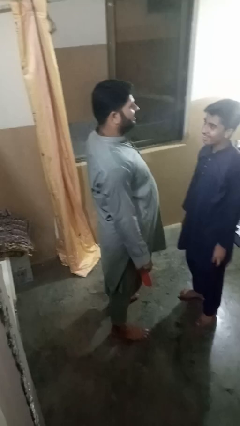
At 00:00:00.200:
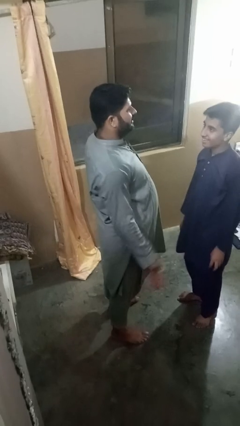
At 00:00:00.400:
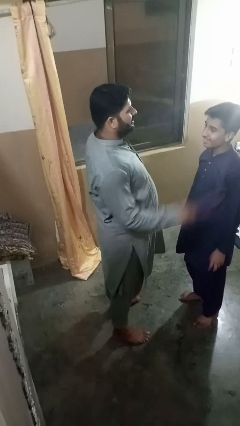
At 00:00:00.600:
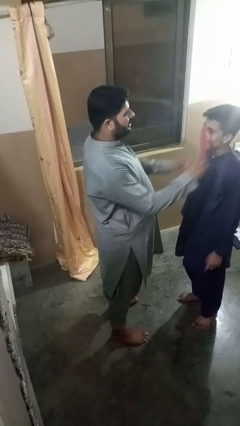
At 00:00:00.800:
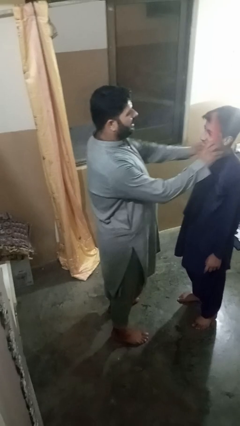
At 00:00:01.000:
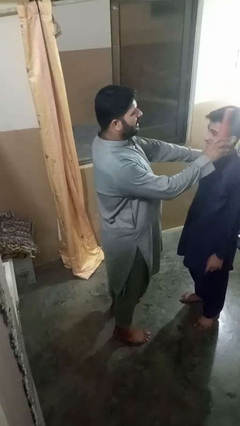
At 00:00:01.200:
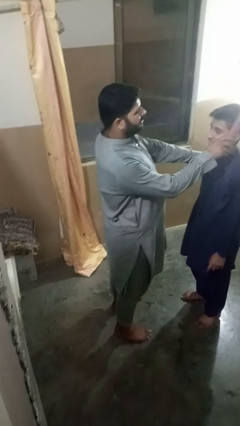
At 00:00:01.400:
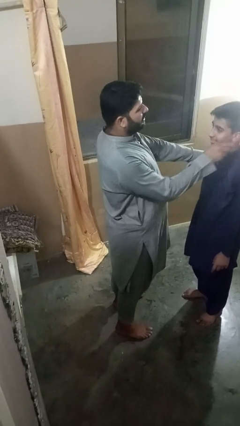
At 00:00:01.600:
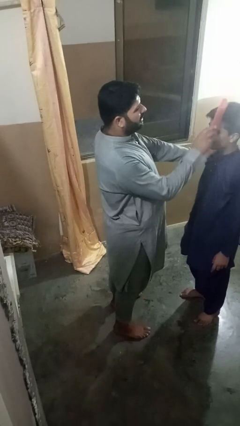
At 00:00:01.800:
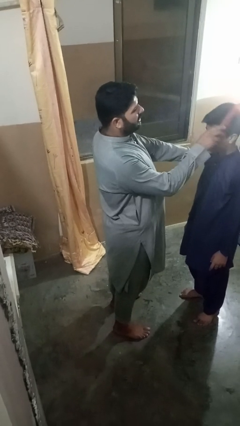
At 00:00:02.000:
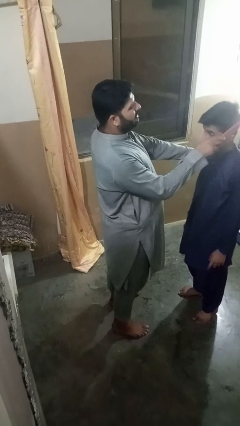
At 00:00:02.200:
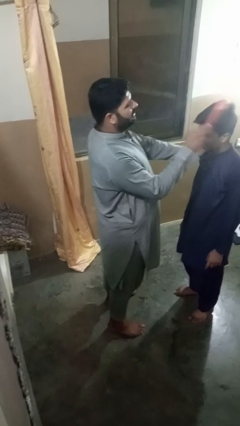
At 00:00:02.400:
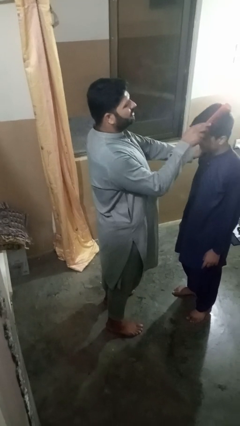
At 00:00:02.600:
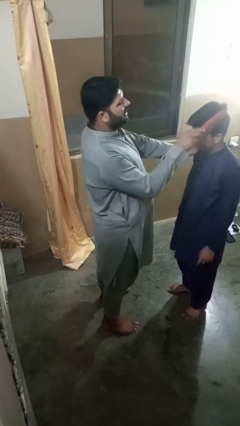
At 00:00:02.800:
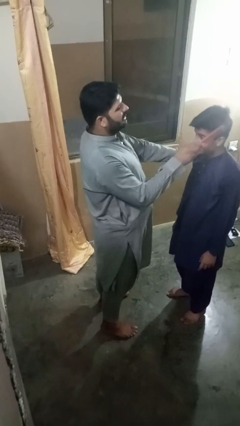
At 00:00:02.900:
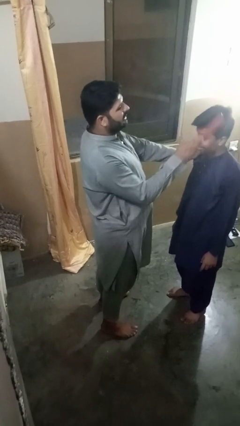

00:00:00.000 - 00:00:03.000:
person brushes hair of person

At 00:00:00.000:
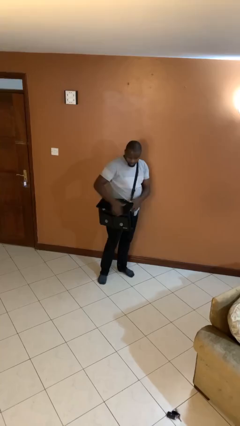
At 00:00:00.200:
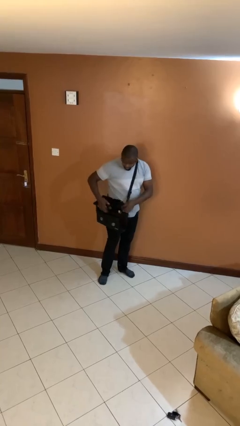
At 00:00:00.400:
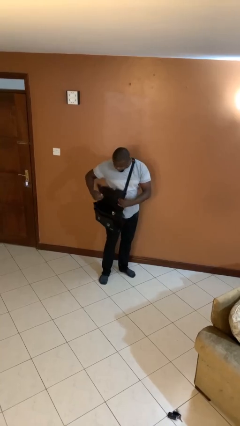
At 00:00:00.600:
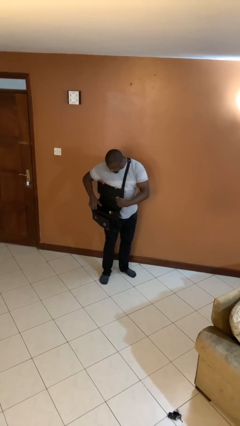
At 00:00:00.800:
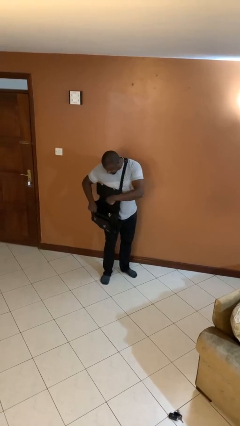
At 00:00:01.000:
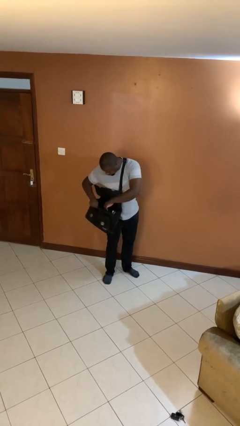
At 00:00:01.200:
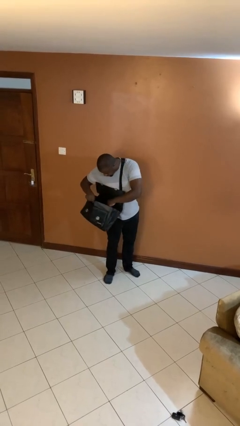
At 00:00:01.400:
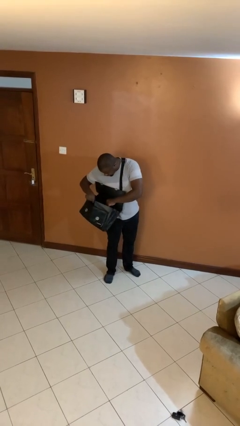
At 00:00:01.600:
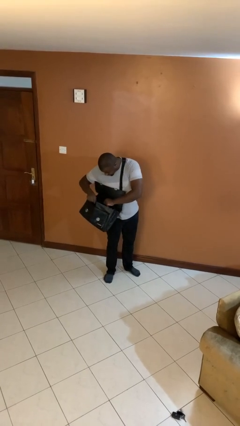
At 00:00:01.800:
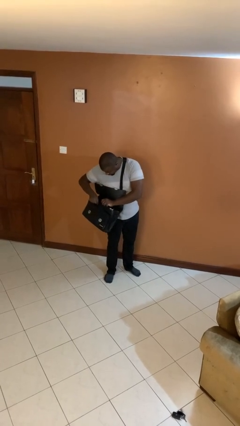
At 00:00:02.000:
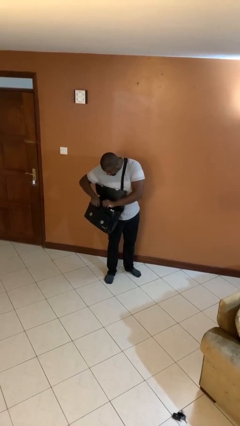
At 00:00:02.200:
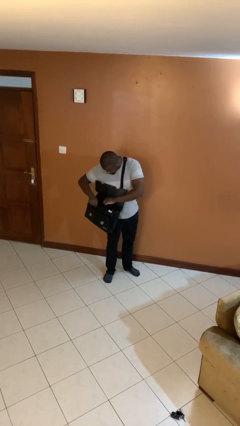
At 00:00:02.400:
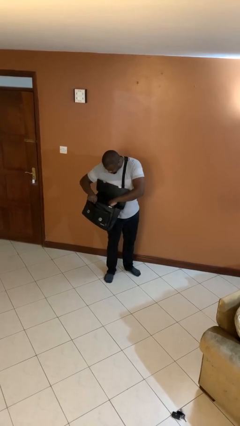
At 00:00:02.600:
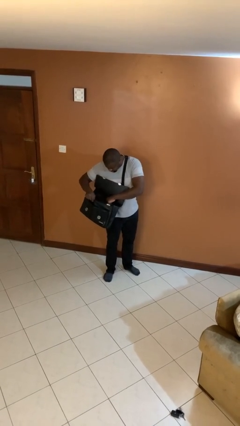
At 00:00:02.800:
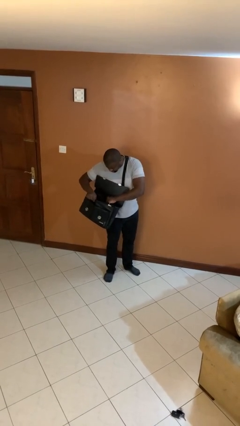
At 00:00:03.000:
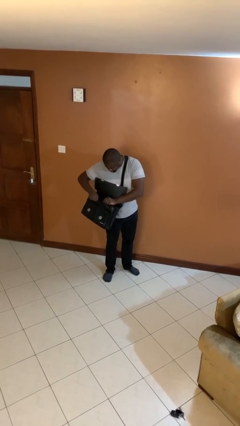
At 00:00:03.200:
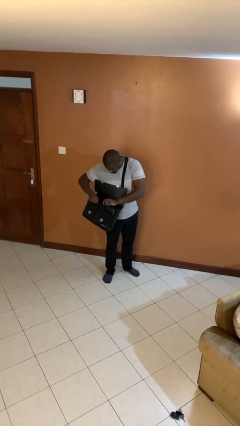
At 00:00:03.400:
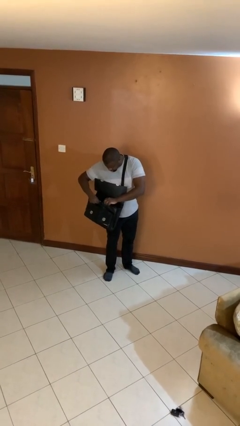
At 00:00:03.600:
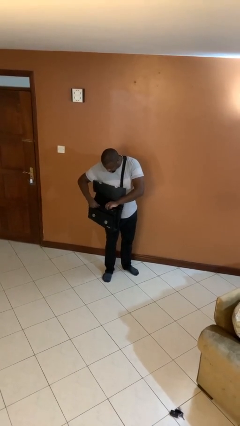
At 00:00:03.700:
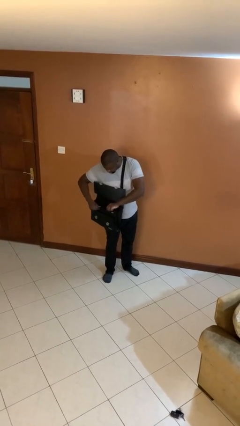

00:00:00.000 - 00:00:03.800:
person searches in purse

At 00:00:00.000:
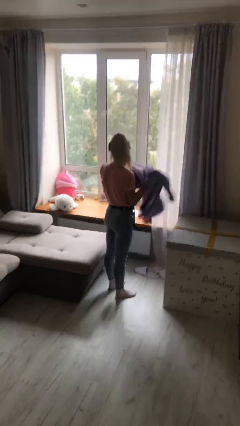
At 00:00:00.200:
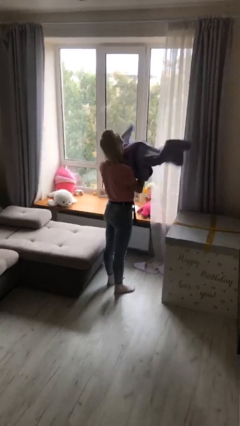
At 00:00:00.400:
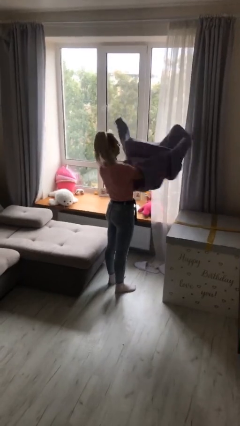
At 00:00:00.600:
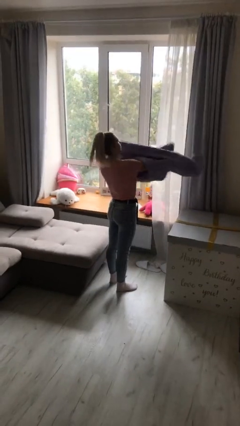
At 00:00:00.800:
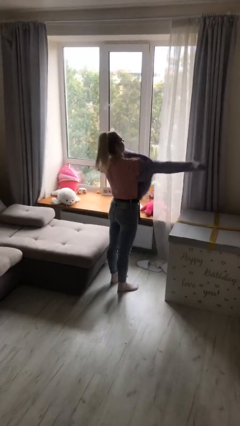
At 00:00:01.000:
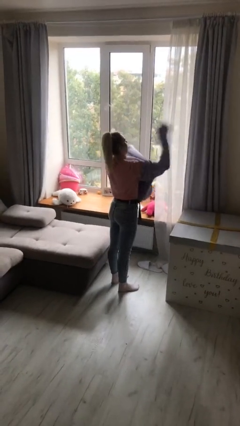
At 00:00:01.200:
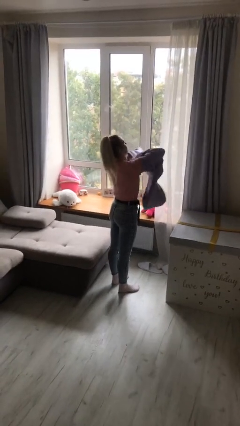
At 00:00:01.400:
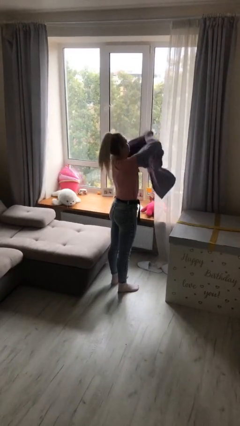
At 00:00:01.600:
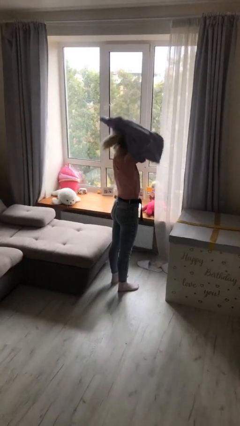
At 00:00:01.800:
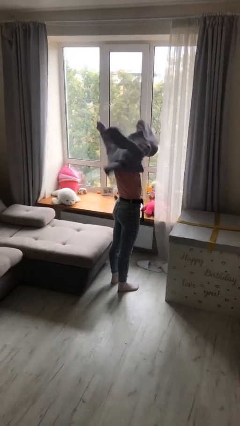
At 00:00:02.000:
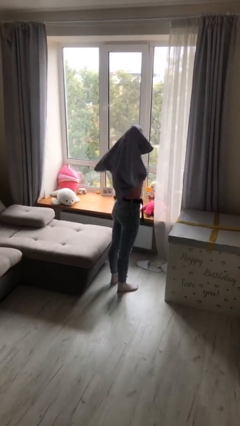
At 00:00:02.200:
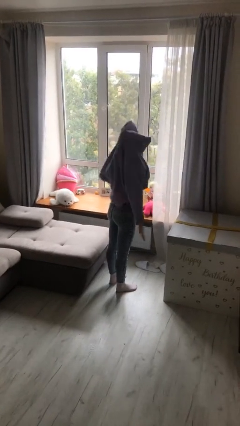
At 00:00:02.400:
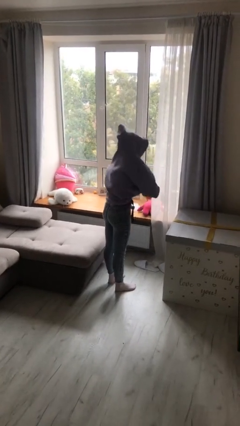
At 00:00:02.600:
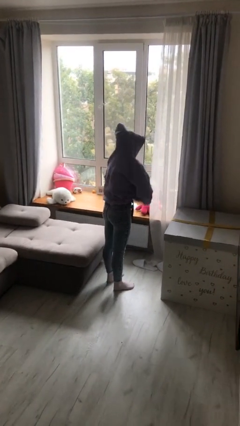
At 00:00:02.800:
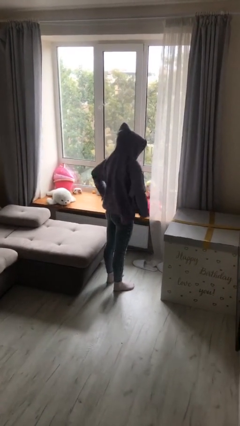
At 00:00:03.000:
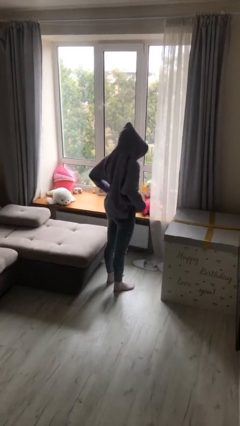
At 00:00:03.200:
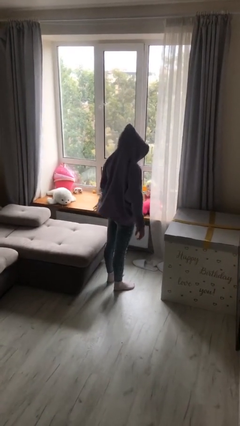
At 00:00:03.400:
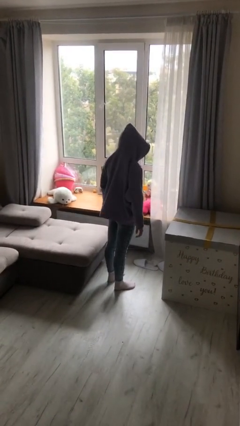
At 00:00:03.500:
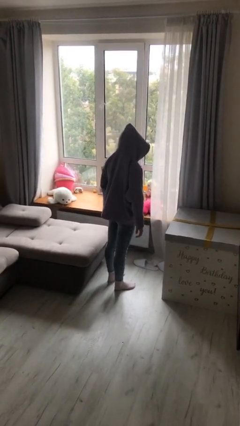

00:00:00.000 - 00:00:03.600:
person puts on hoodie

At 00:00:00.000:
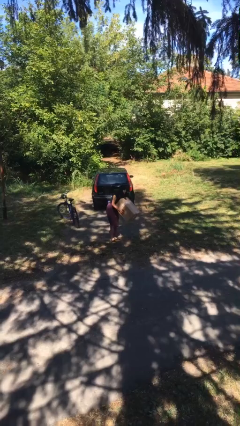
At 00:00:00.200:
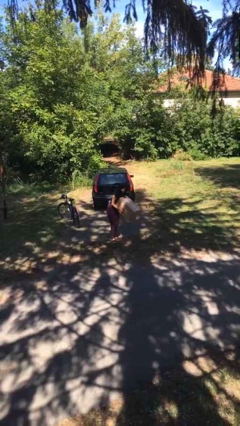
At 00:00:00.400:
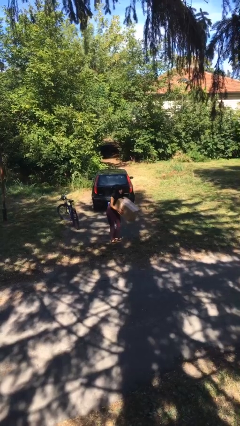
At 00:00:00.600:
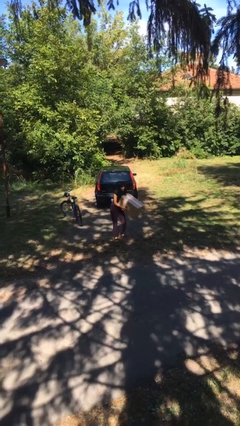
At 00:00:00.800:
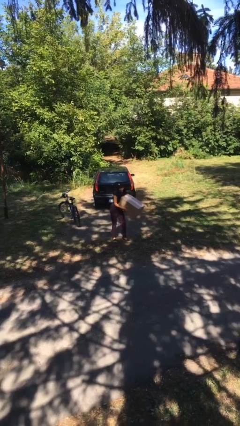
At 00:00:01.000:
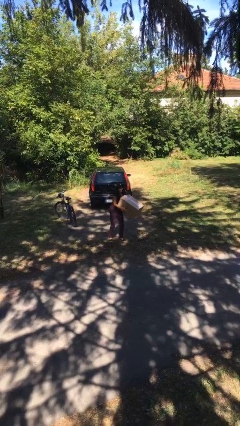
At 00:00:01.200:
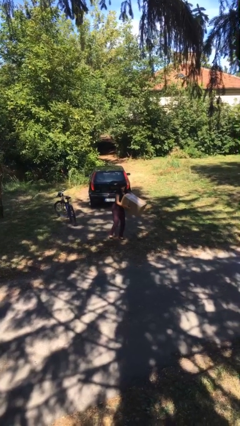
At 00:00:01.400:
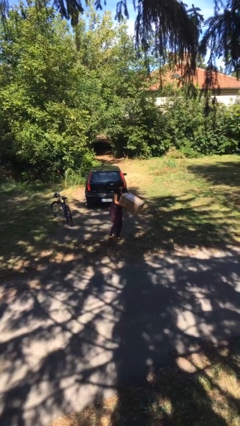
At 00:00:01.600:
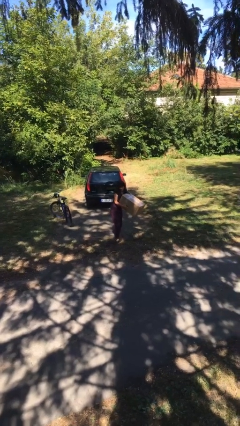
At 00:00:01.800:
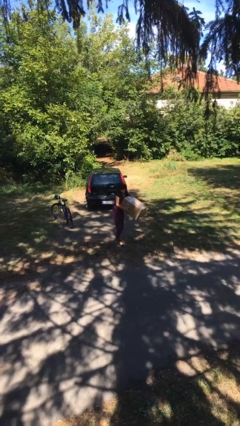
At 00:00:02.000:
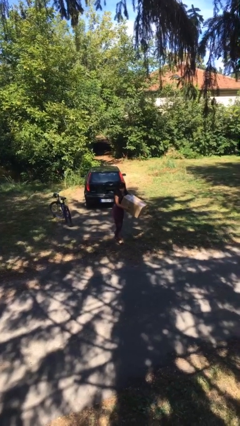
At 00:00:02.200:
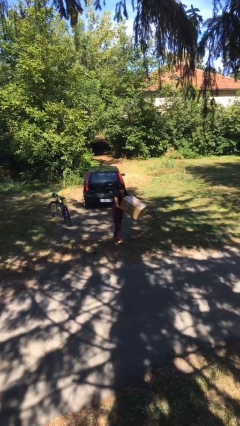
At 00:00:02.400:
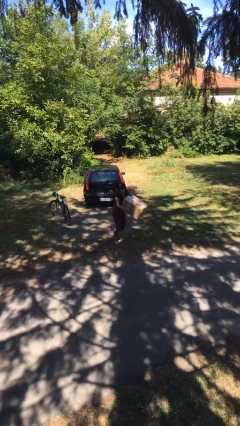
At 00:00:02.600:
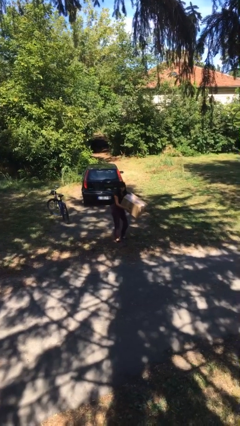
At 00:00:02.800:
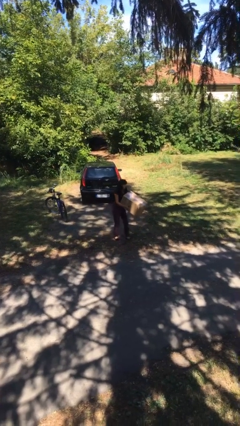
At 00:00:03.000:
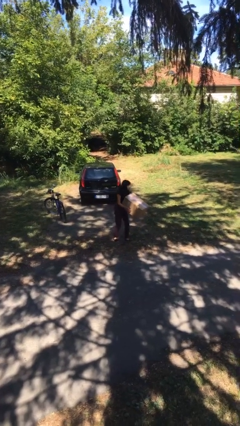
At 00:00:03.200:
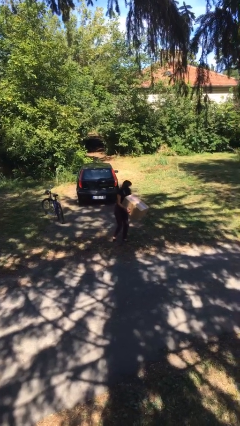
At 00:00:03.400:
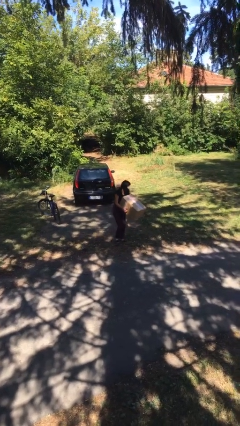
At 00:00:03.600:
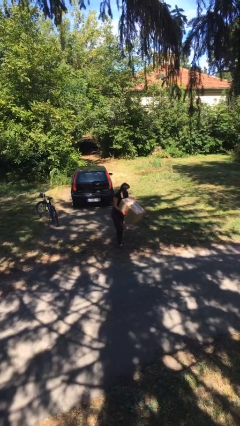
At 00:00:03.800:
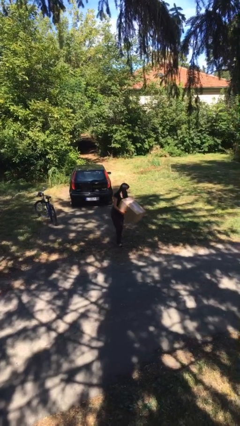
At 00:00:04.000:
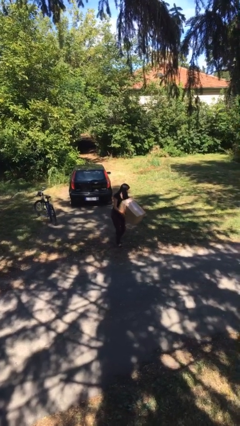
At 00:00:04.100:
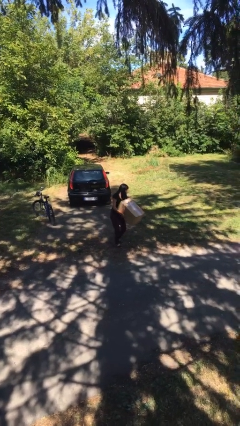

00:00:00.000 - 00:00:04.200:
person carries heavy object

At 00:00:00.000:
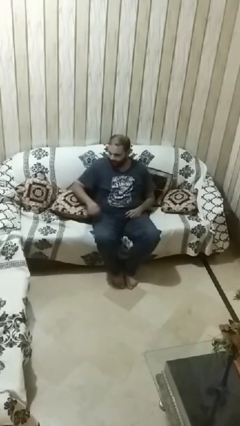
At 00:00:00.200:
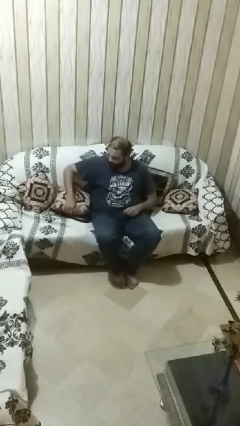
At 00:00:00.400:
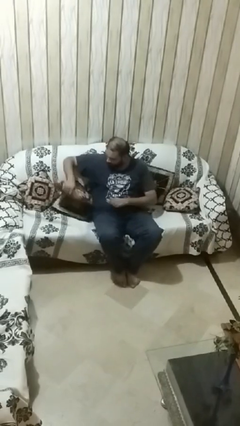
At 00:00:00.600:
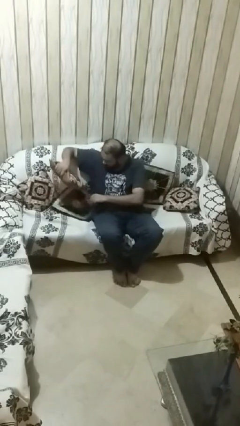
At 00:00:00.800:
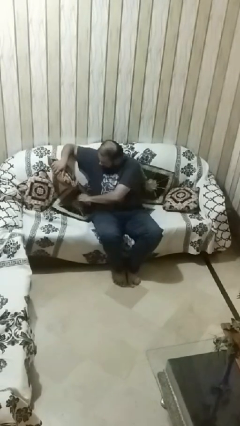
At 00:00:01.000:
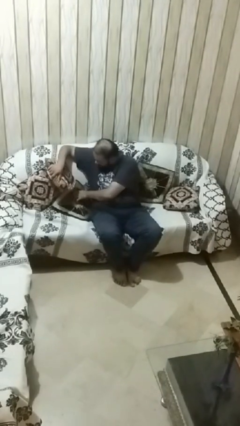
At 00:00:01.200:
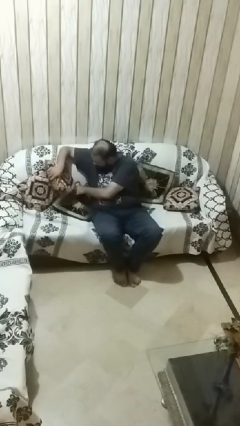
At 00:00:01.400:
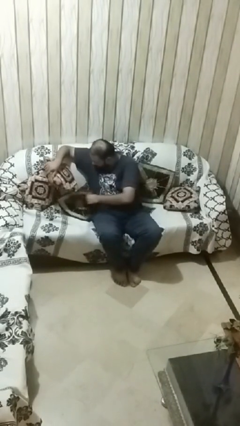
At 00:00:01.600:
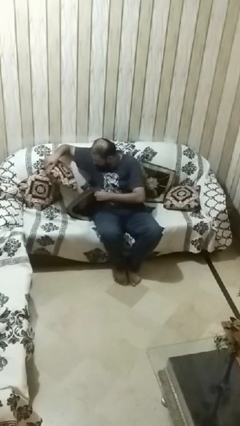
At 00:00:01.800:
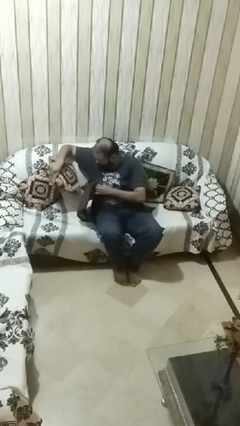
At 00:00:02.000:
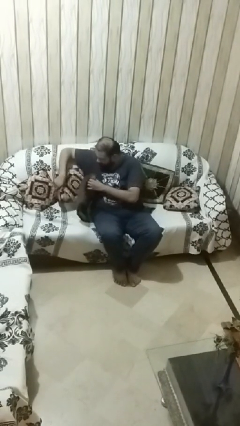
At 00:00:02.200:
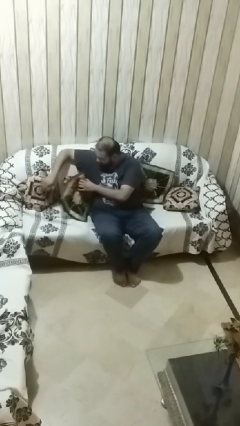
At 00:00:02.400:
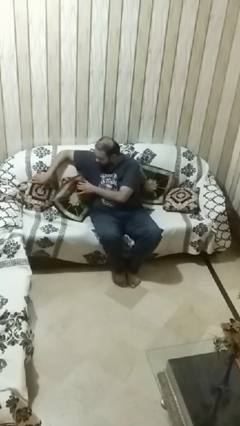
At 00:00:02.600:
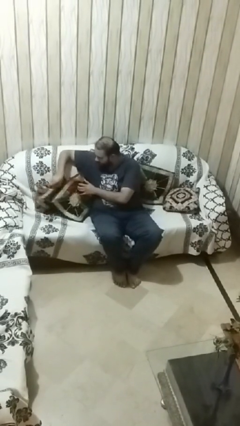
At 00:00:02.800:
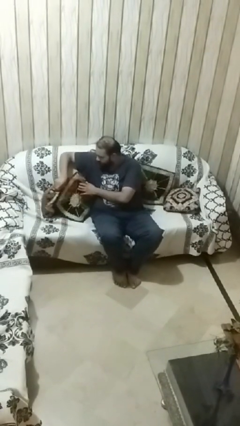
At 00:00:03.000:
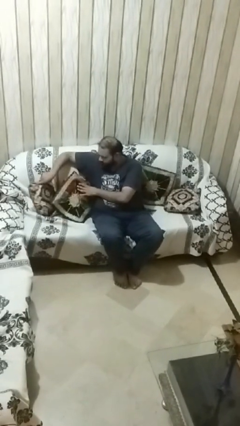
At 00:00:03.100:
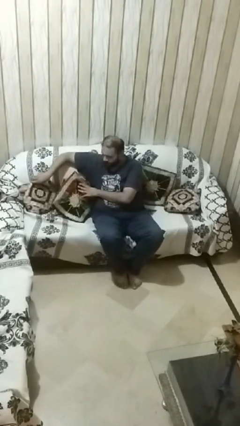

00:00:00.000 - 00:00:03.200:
person searches in couch
